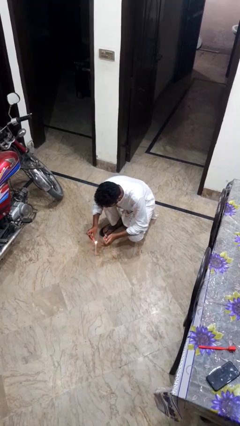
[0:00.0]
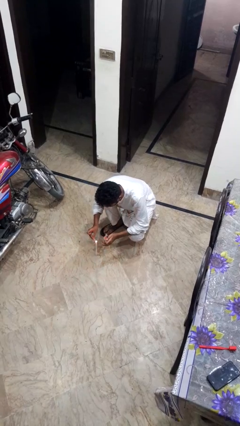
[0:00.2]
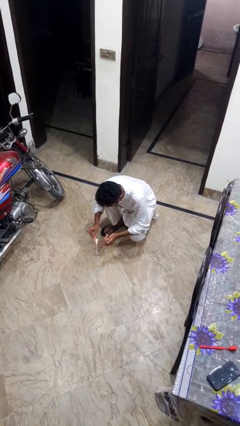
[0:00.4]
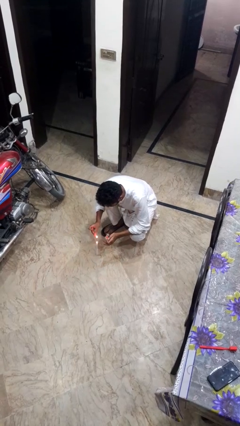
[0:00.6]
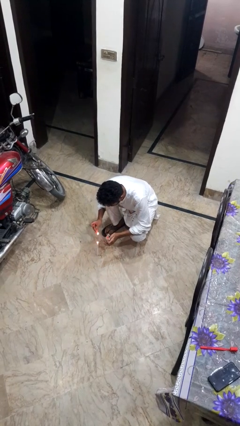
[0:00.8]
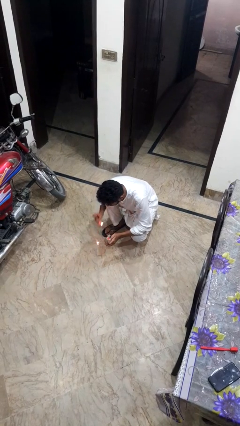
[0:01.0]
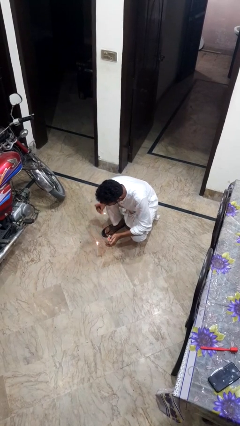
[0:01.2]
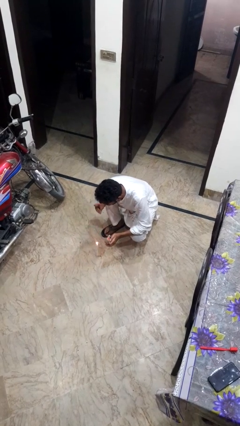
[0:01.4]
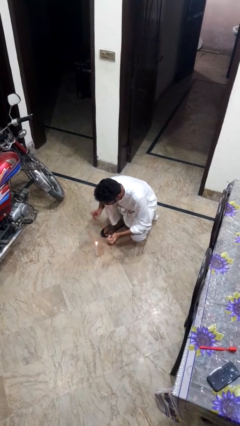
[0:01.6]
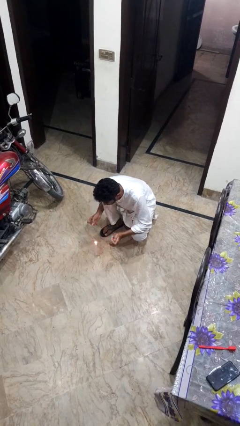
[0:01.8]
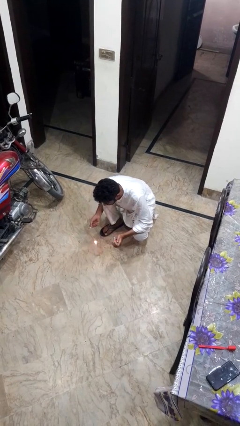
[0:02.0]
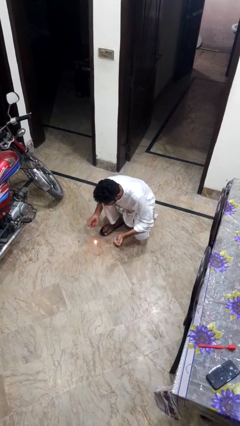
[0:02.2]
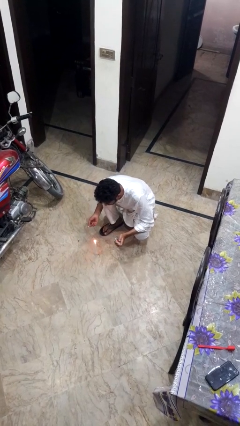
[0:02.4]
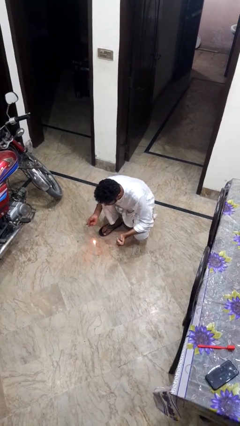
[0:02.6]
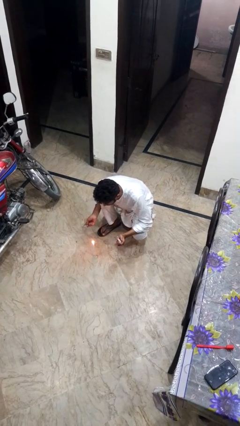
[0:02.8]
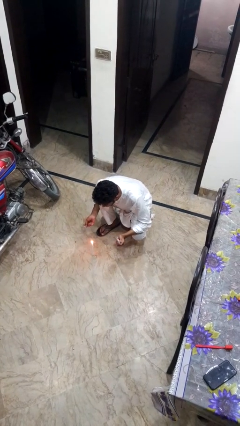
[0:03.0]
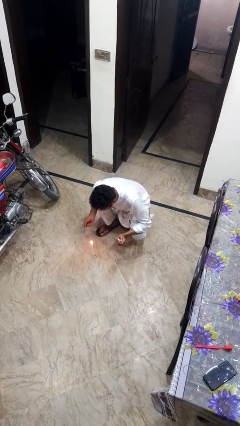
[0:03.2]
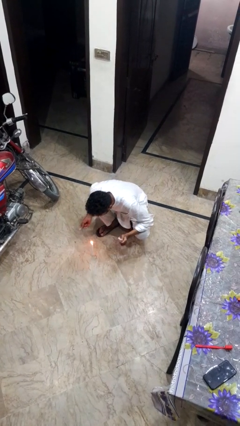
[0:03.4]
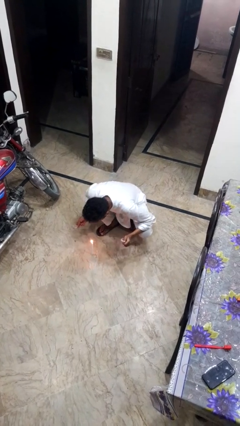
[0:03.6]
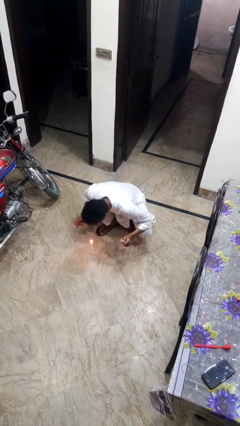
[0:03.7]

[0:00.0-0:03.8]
person lights candle

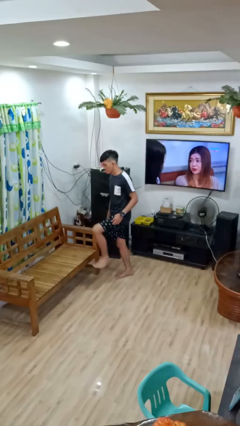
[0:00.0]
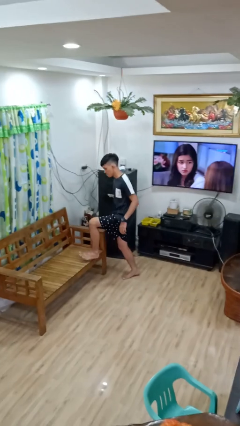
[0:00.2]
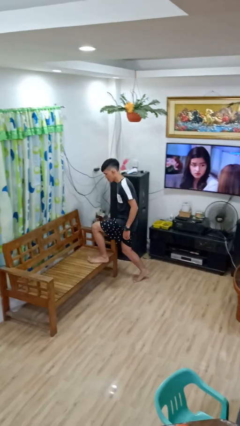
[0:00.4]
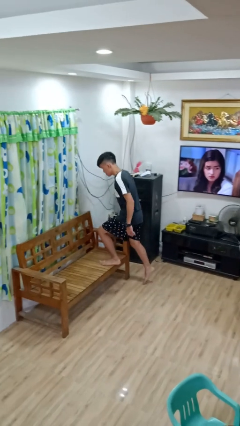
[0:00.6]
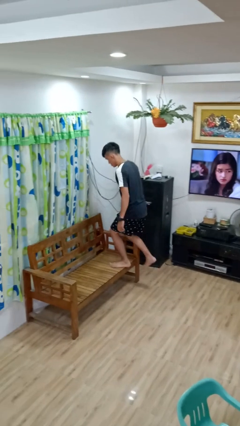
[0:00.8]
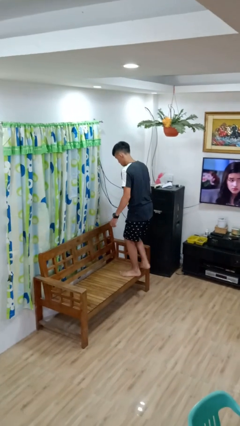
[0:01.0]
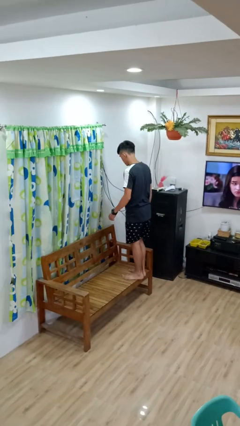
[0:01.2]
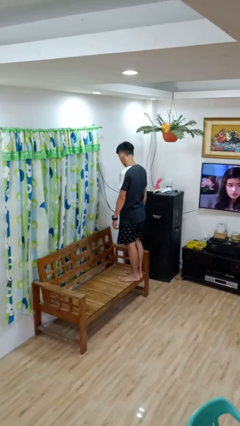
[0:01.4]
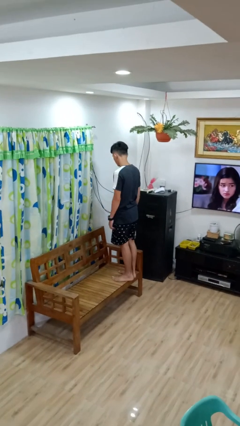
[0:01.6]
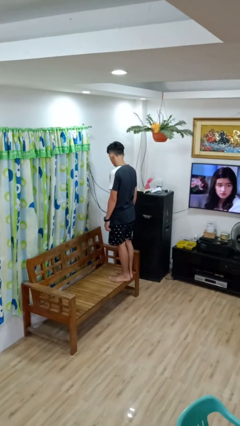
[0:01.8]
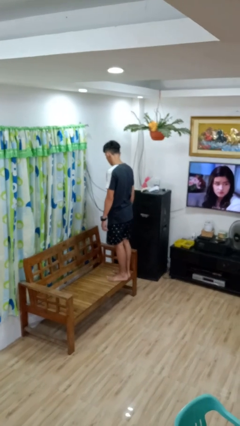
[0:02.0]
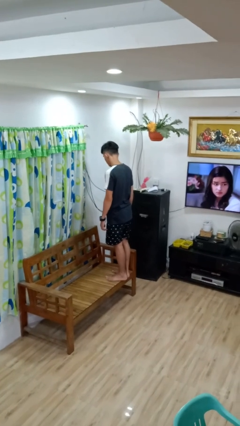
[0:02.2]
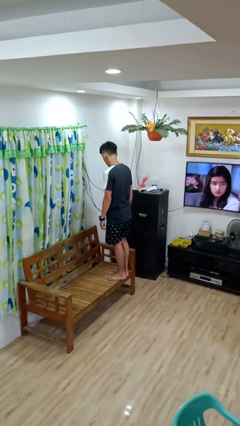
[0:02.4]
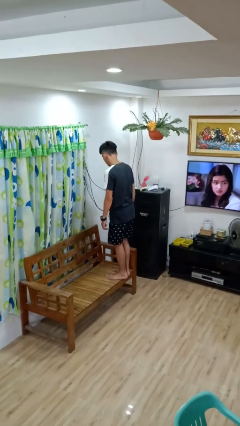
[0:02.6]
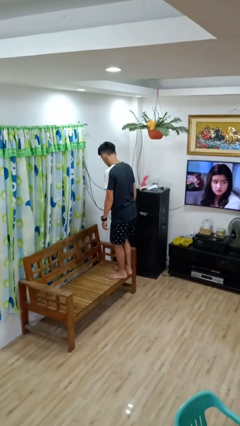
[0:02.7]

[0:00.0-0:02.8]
person climbs on couch

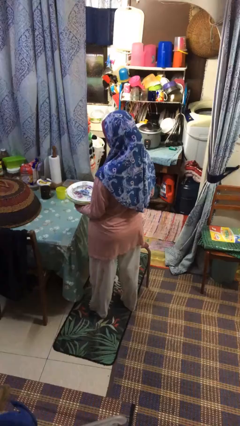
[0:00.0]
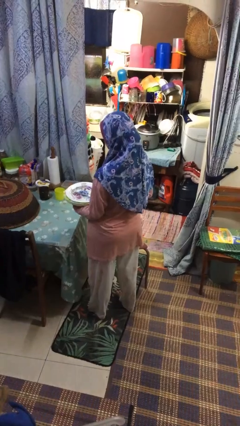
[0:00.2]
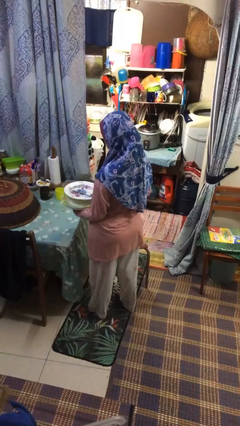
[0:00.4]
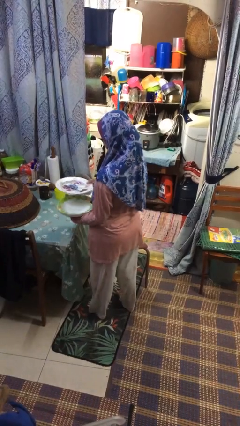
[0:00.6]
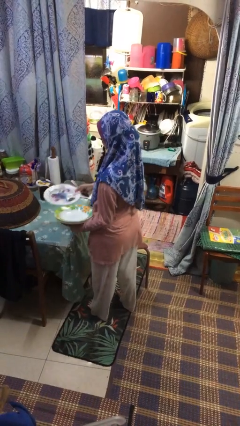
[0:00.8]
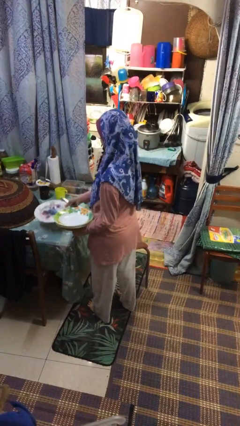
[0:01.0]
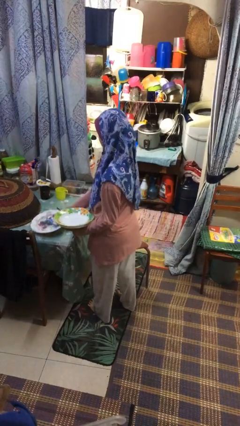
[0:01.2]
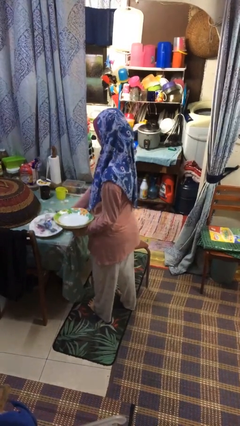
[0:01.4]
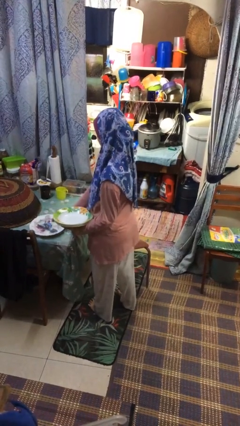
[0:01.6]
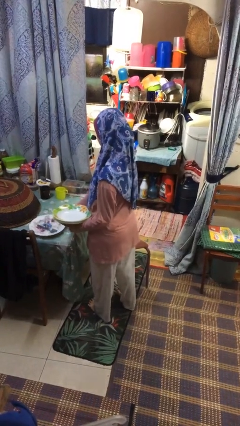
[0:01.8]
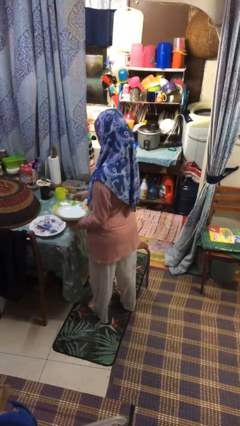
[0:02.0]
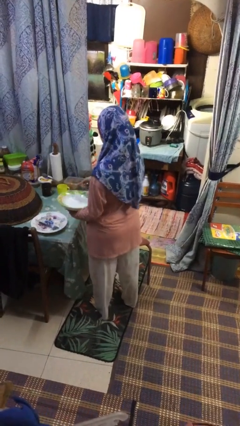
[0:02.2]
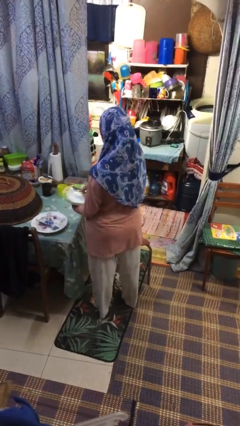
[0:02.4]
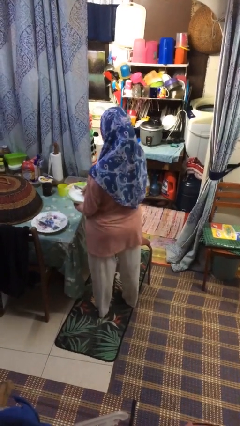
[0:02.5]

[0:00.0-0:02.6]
person sets table

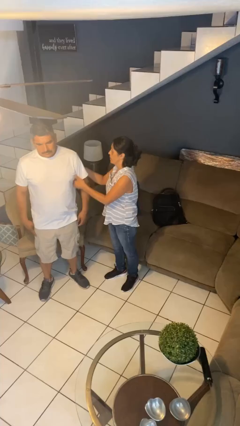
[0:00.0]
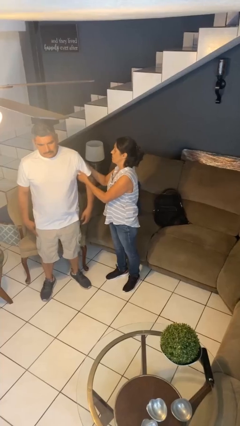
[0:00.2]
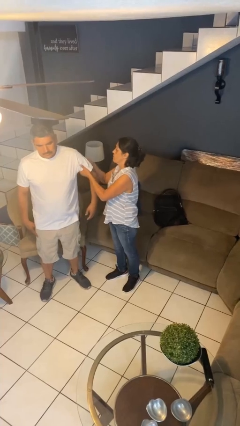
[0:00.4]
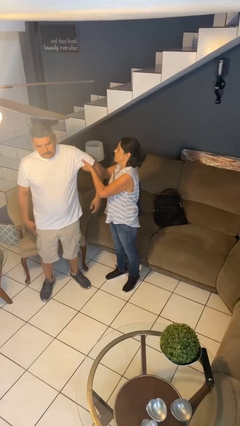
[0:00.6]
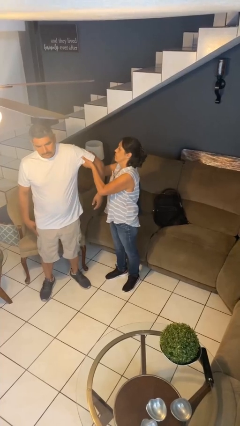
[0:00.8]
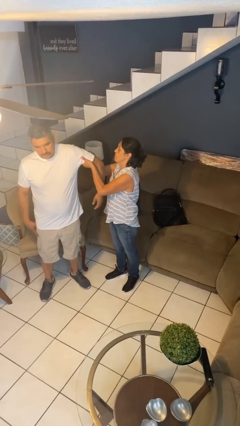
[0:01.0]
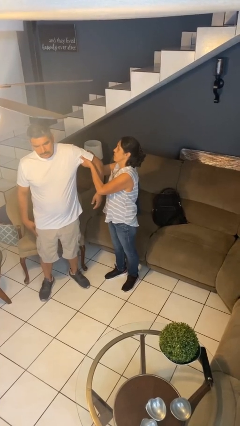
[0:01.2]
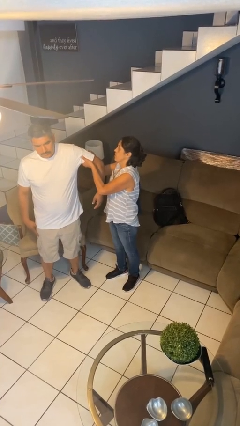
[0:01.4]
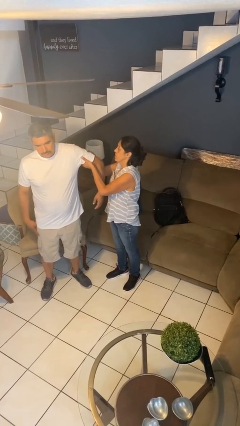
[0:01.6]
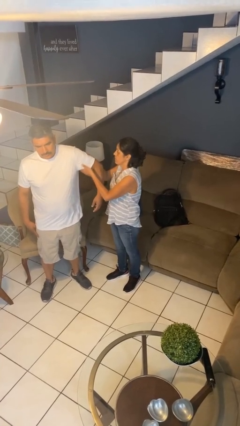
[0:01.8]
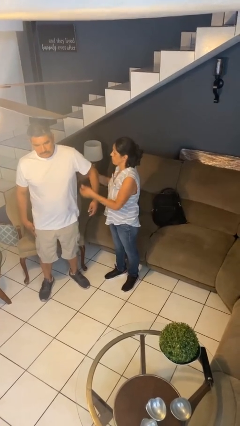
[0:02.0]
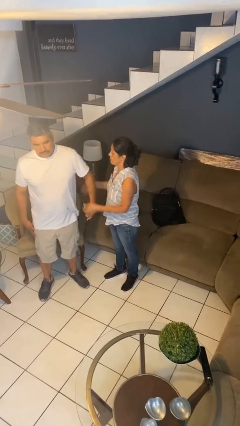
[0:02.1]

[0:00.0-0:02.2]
person grabs person by bicep

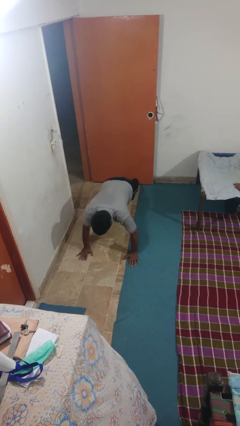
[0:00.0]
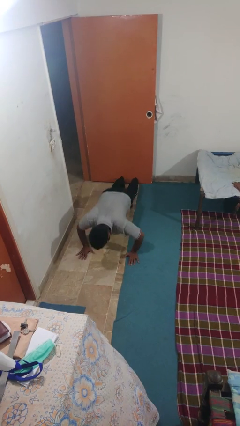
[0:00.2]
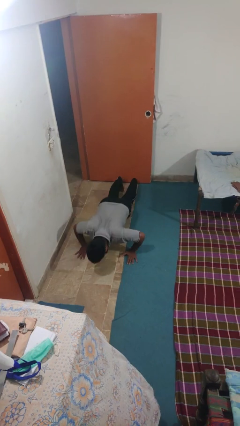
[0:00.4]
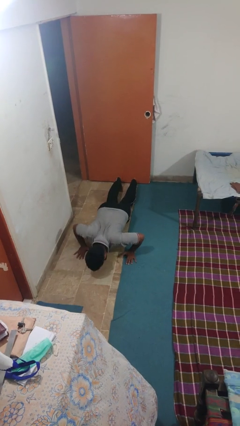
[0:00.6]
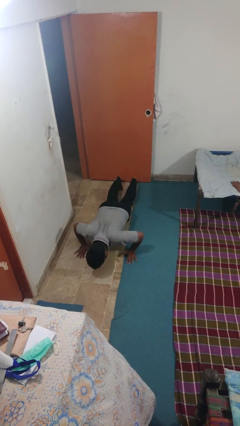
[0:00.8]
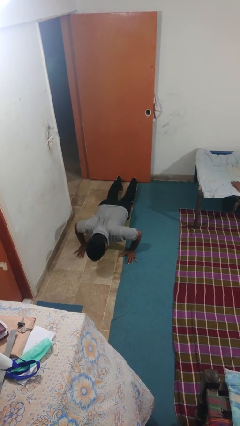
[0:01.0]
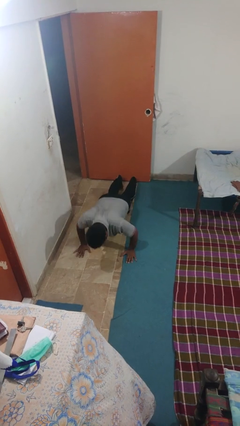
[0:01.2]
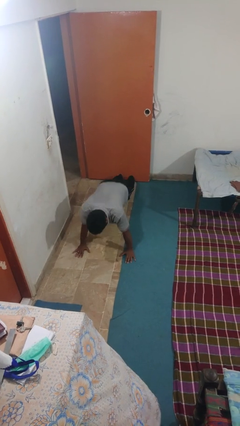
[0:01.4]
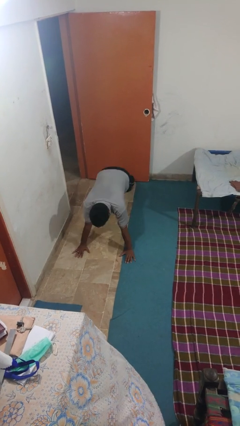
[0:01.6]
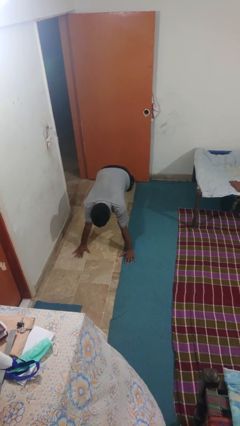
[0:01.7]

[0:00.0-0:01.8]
person exercises with pushup

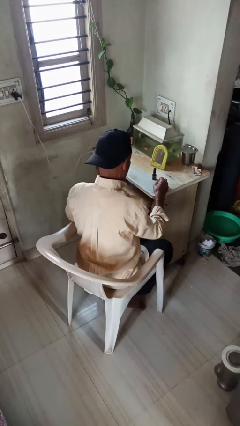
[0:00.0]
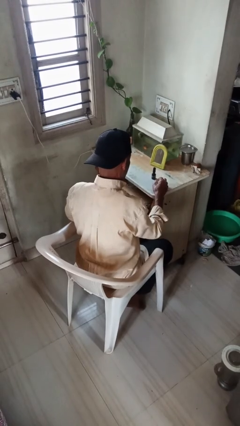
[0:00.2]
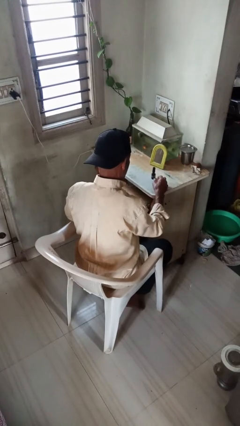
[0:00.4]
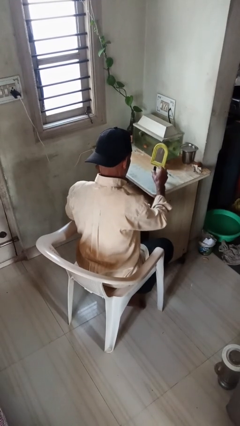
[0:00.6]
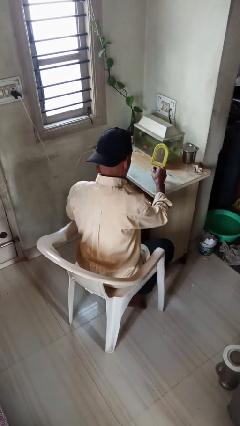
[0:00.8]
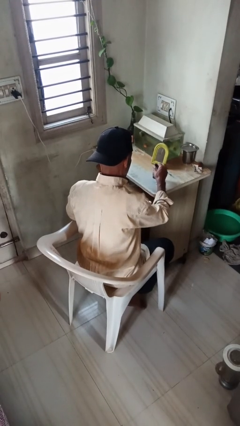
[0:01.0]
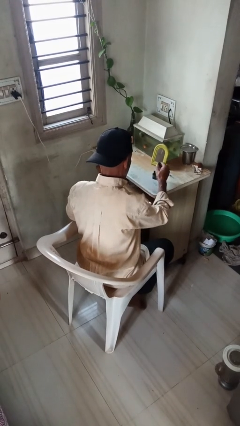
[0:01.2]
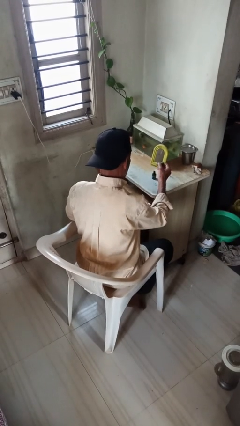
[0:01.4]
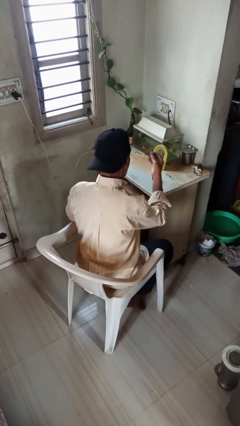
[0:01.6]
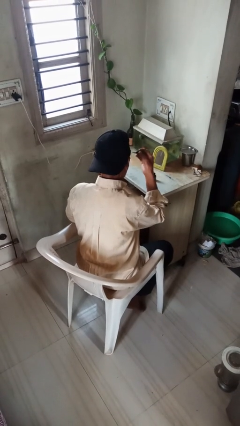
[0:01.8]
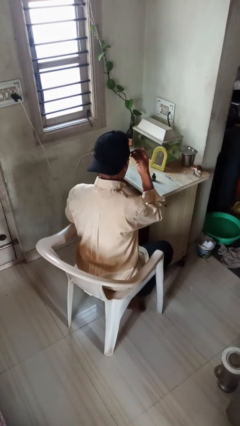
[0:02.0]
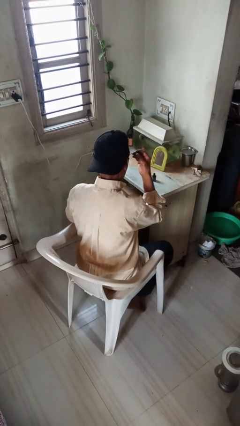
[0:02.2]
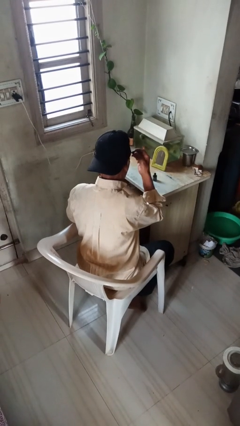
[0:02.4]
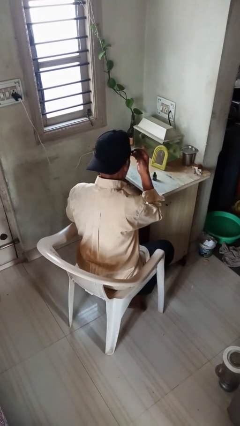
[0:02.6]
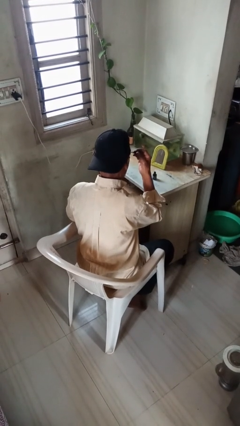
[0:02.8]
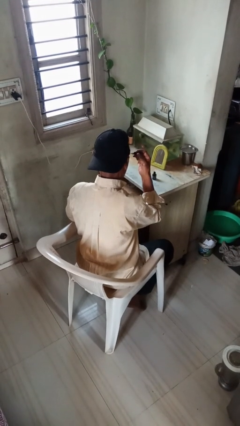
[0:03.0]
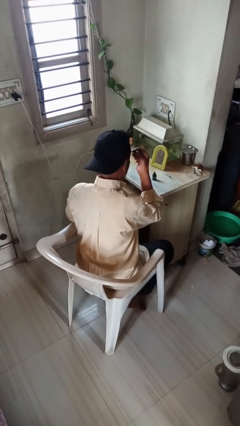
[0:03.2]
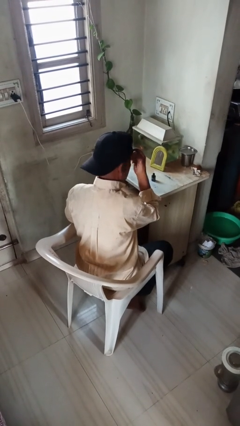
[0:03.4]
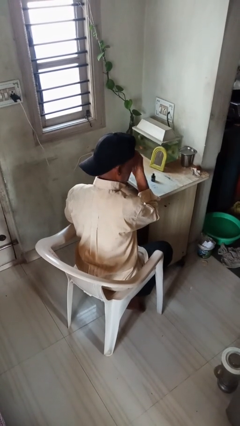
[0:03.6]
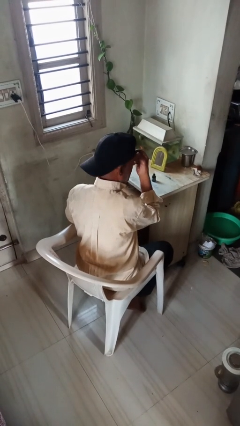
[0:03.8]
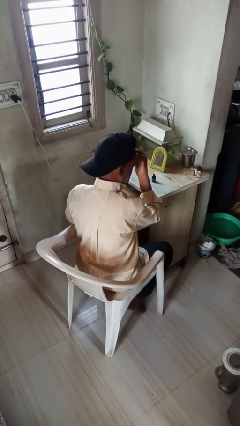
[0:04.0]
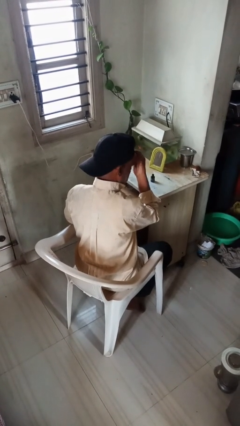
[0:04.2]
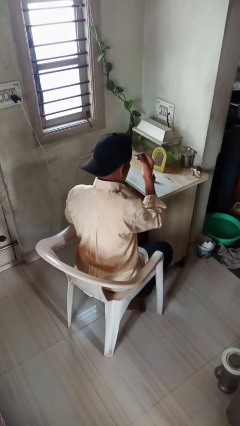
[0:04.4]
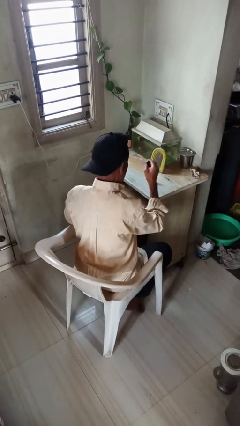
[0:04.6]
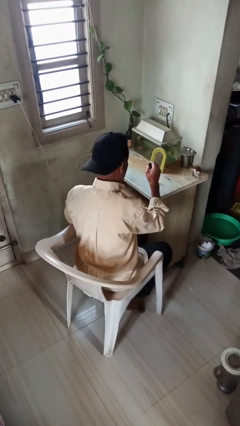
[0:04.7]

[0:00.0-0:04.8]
person applies eye makeup
